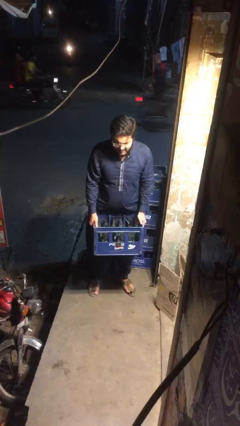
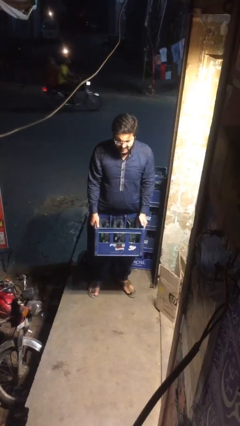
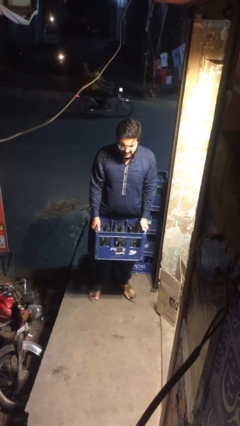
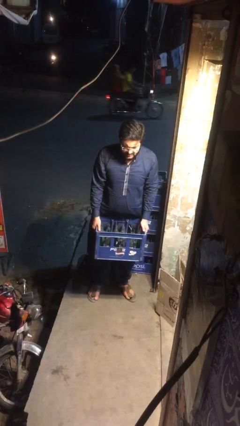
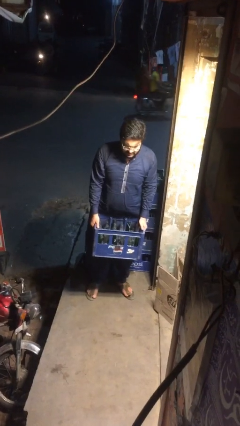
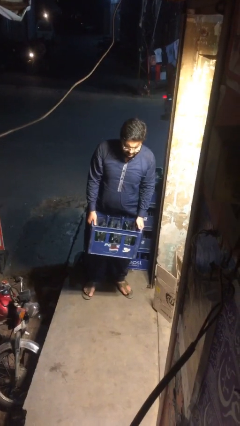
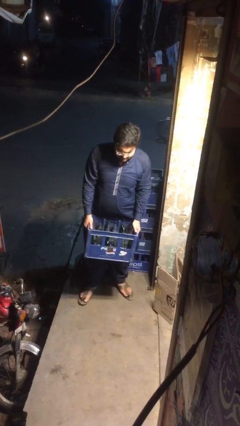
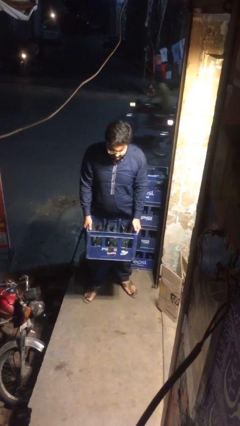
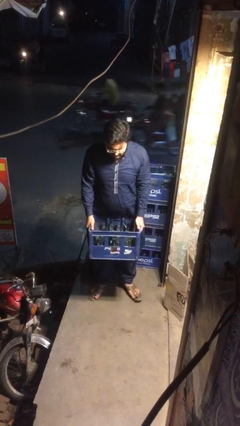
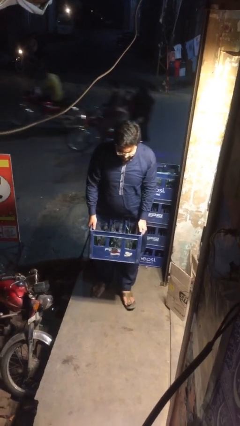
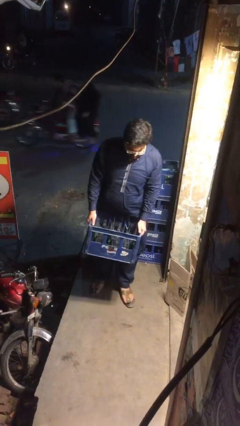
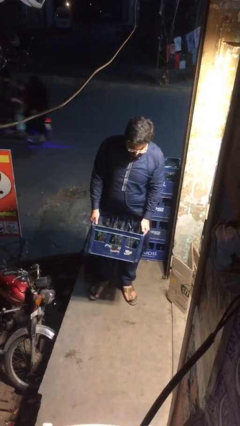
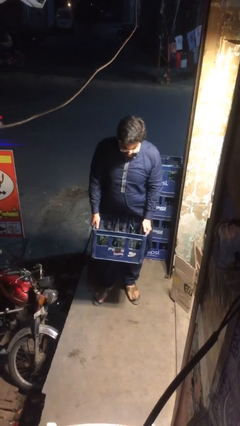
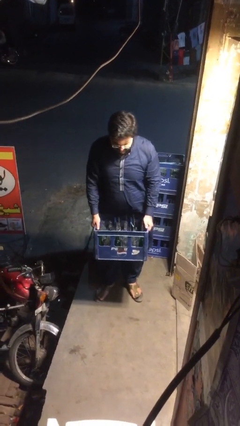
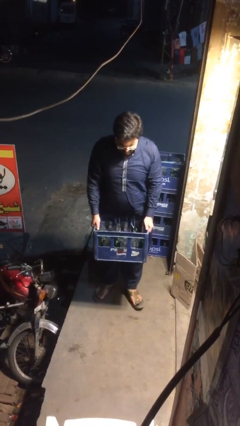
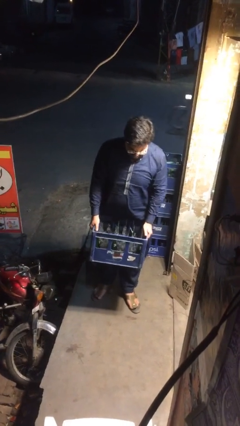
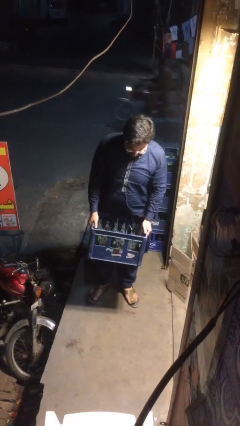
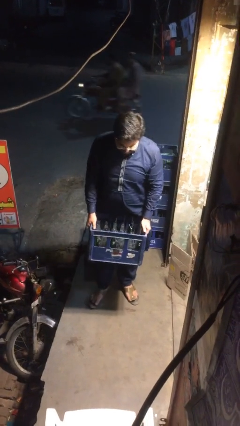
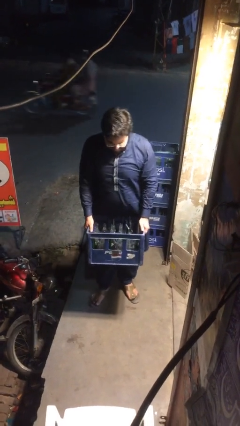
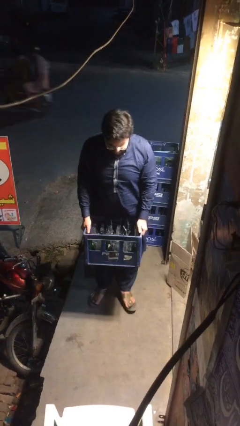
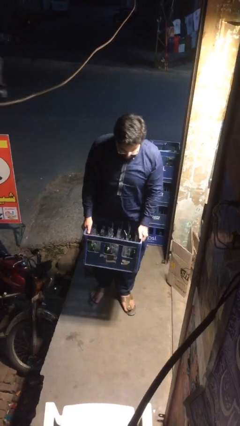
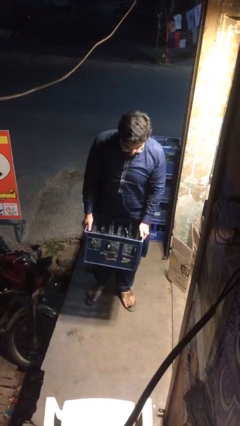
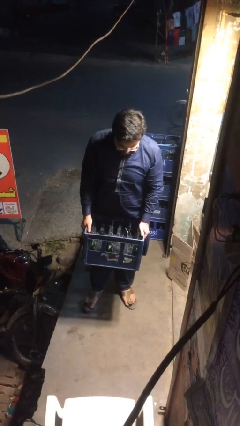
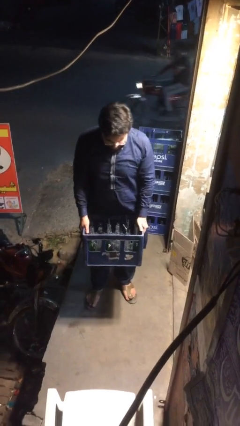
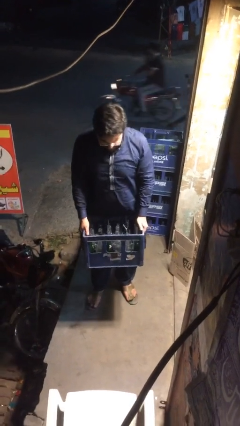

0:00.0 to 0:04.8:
person carries heavy object

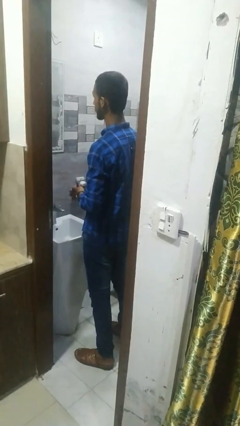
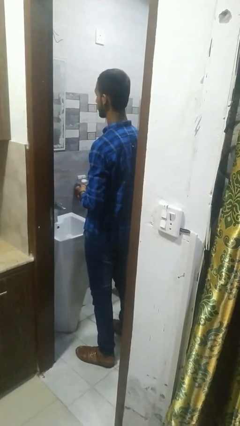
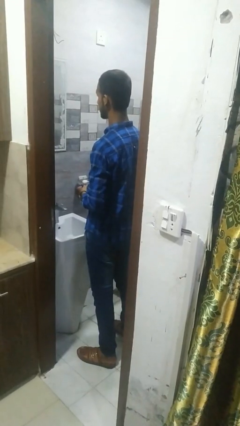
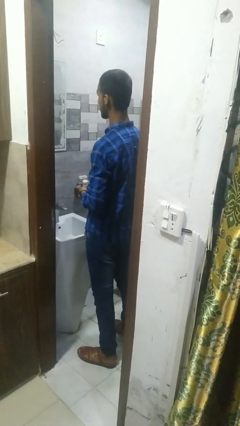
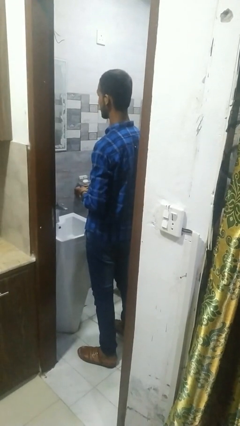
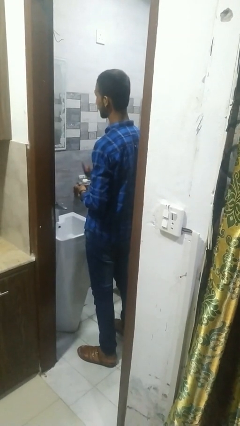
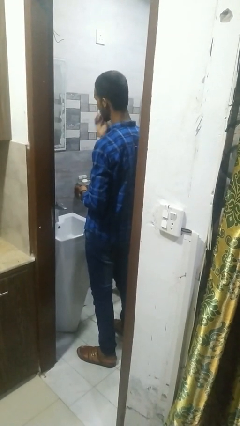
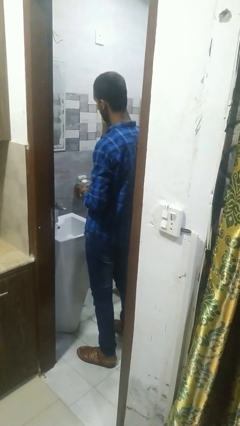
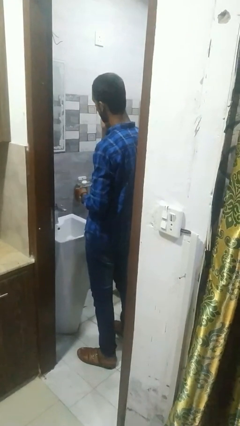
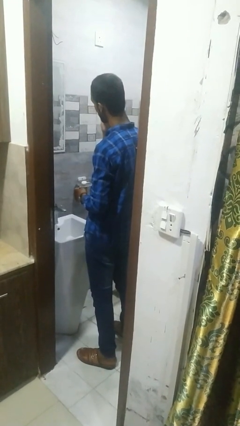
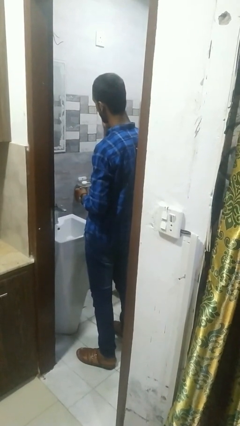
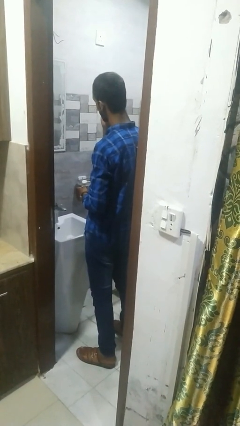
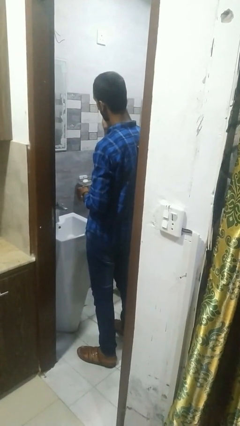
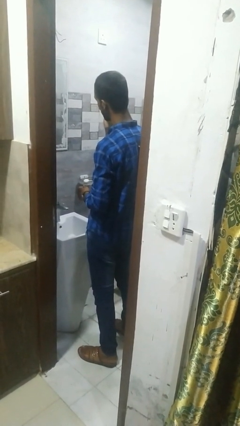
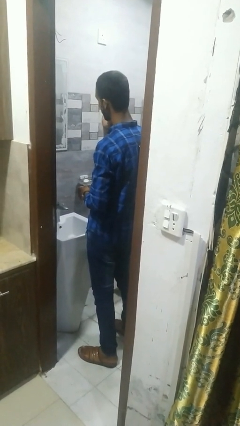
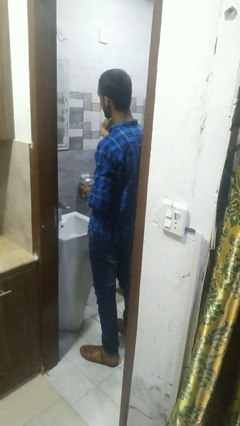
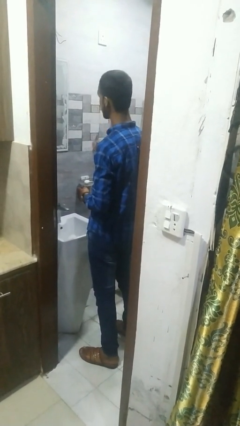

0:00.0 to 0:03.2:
person shaves face

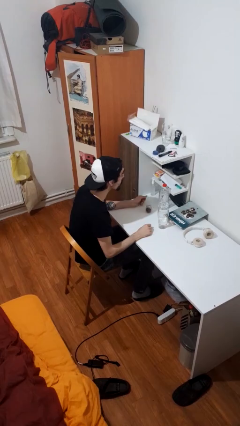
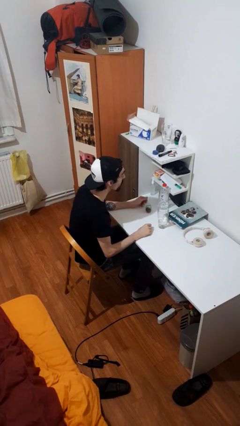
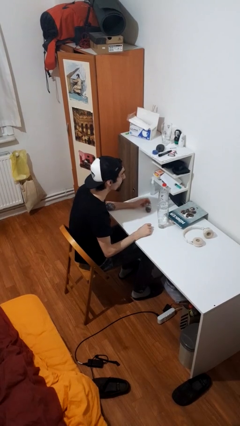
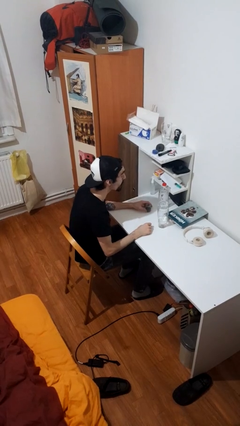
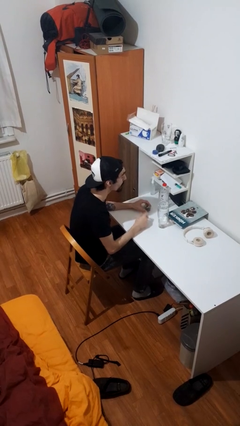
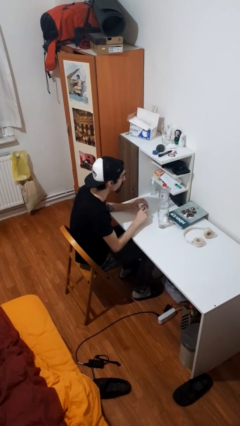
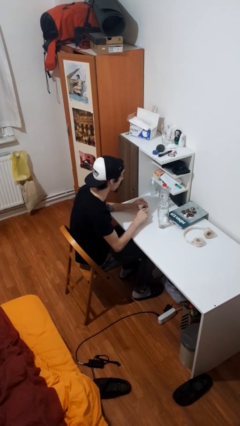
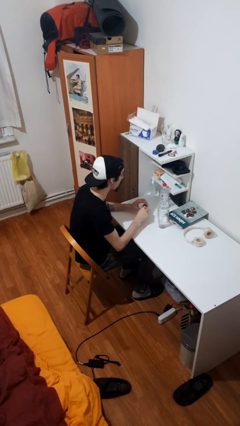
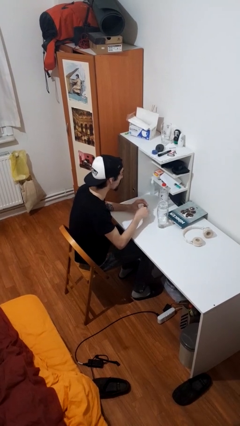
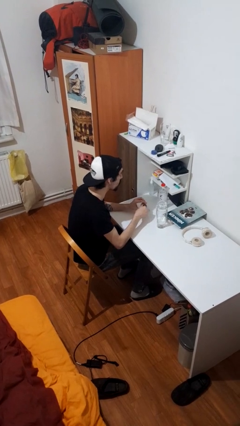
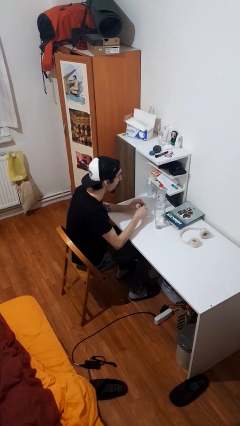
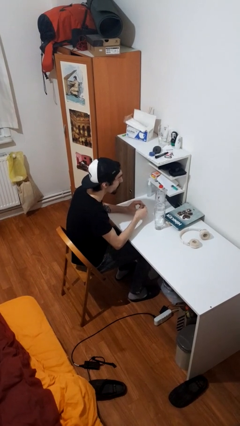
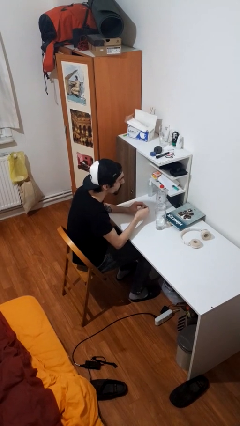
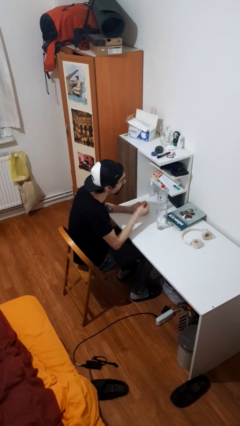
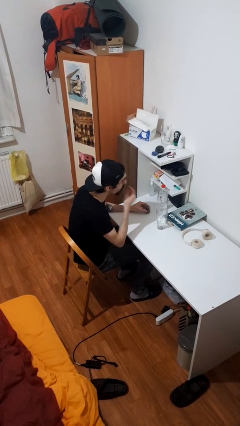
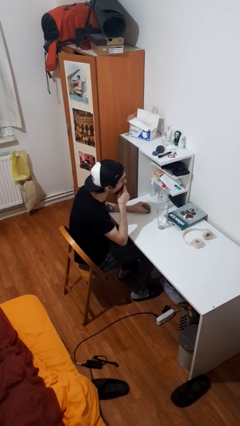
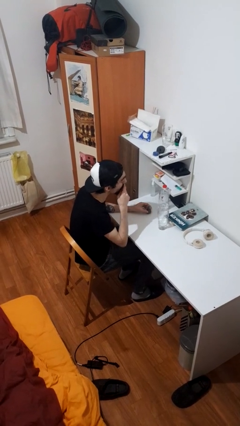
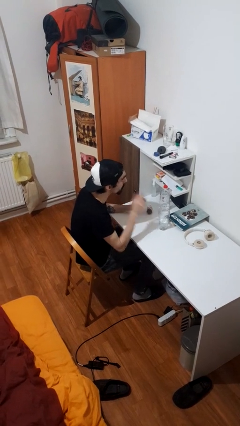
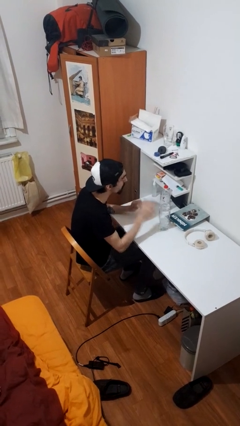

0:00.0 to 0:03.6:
person takes medicine pills

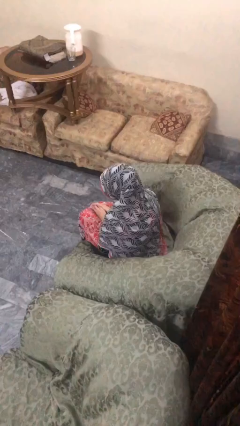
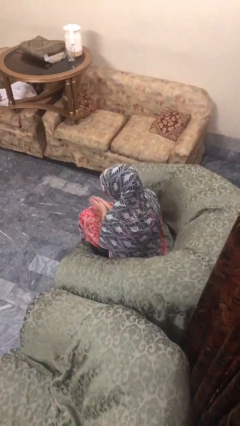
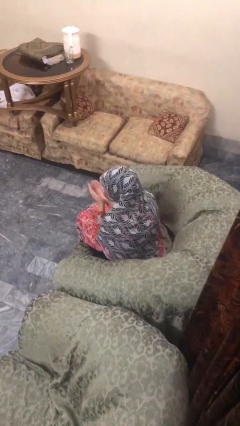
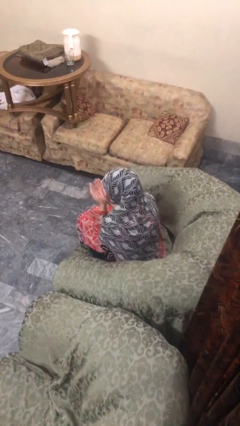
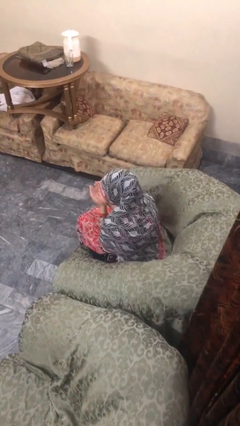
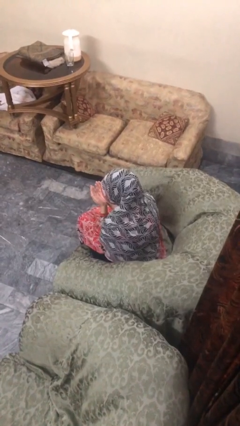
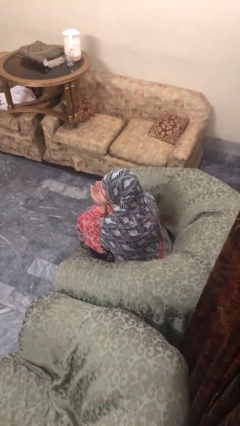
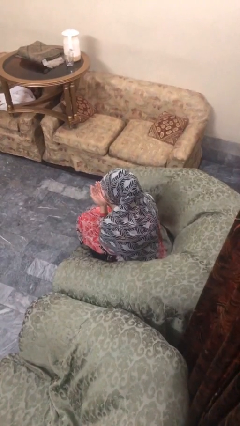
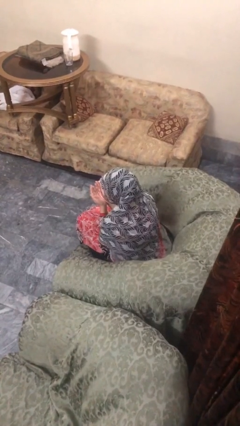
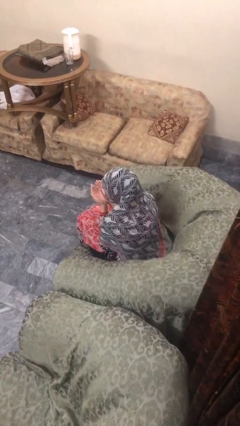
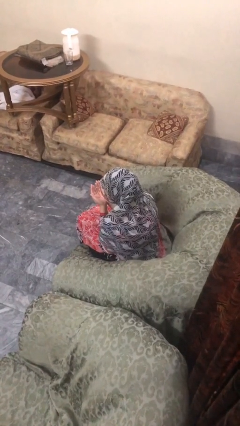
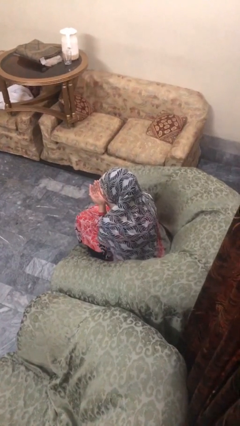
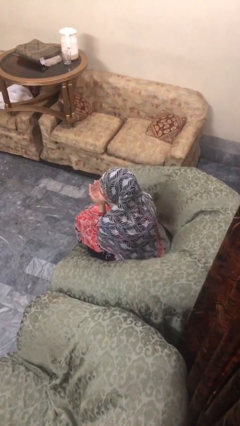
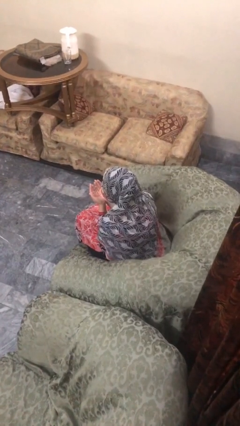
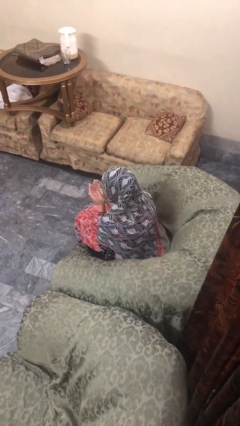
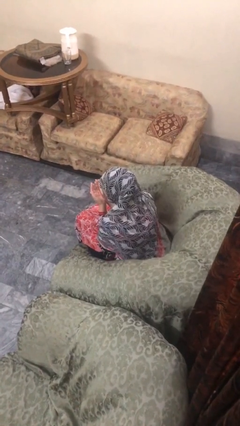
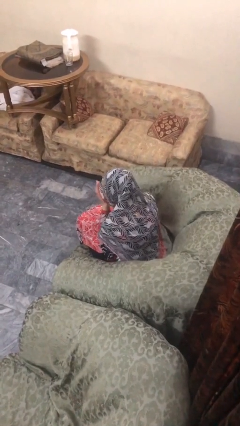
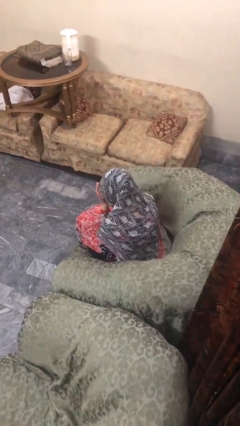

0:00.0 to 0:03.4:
person prays

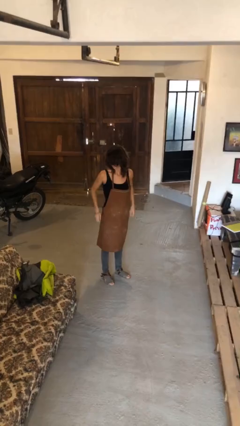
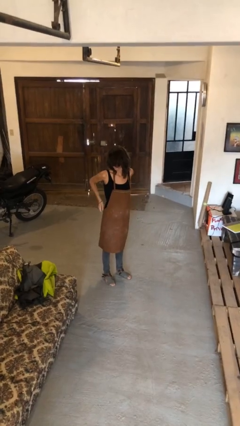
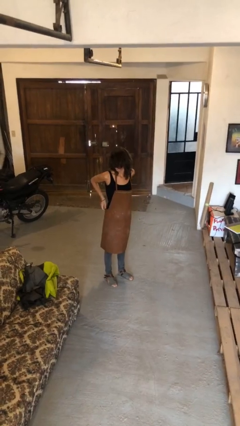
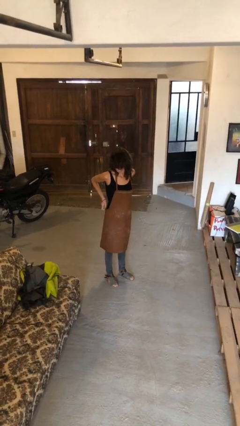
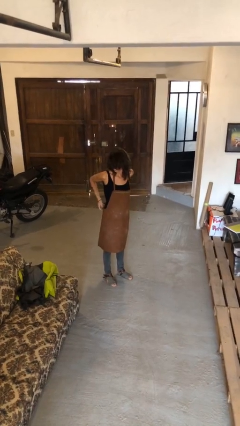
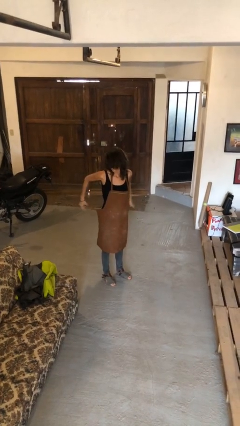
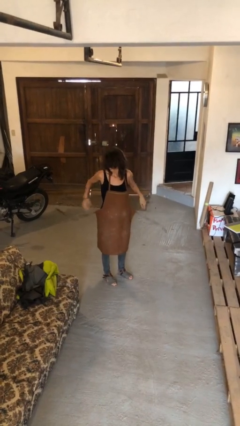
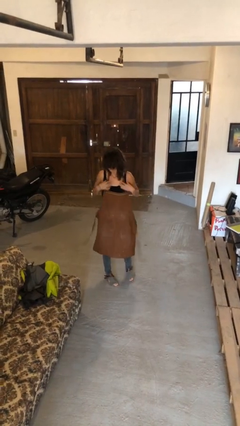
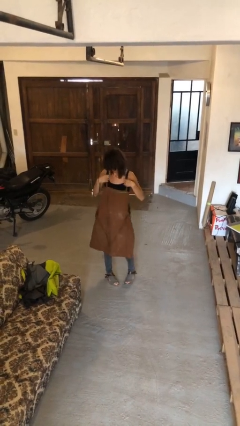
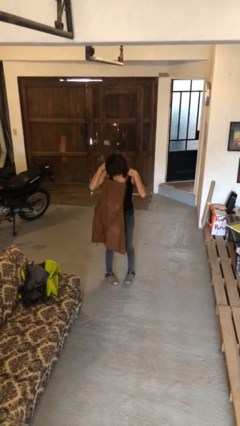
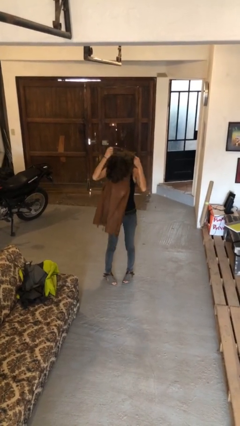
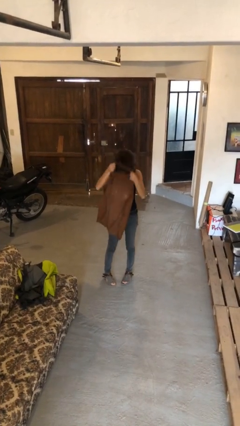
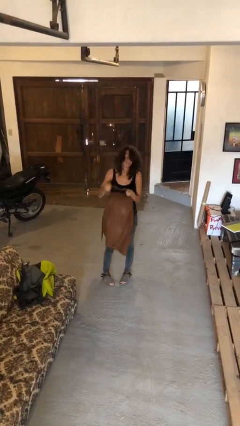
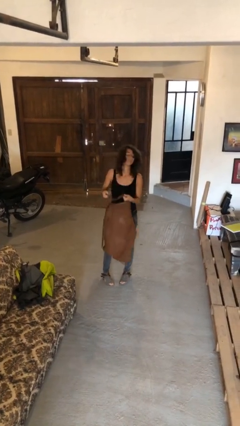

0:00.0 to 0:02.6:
person takes off apron

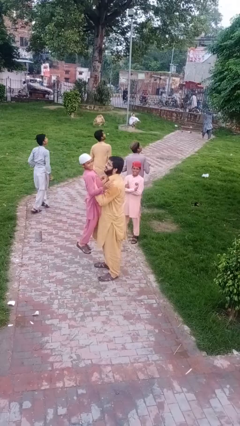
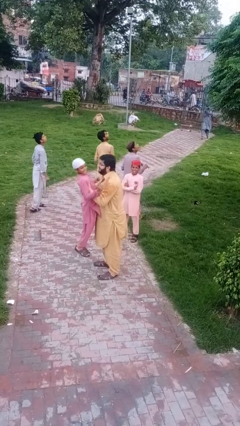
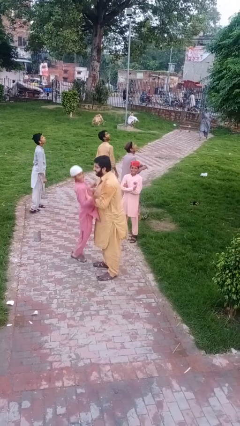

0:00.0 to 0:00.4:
person puts down person
